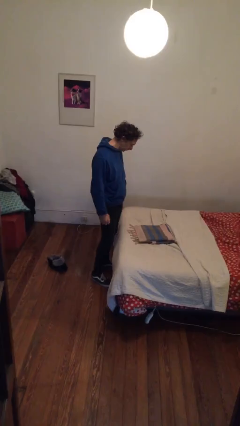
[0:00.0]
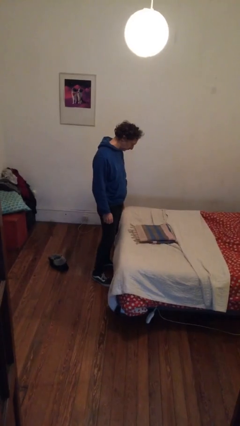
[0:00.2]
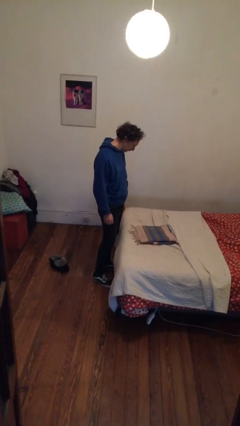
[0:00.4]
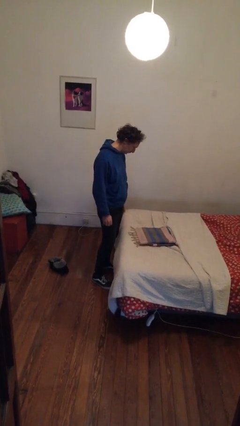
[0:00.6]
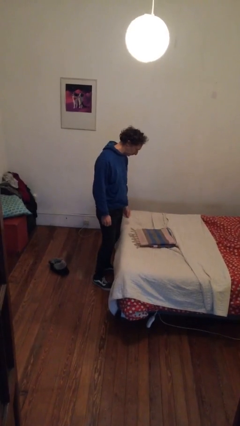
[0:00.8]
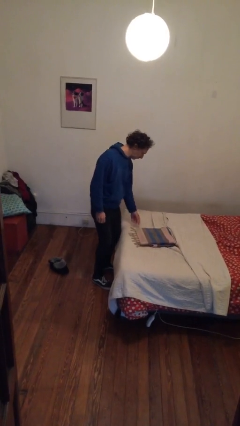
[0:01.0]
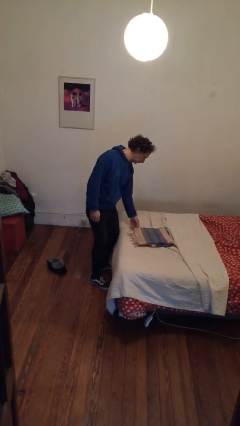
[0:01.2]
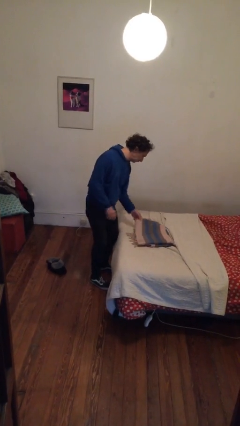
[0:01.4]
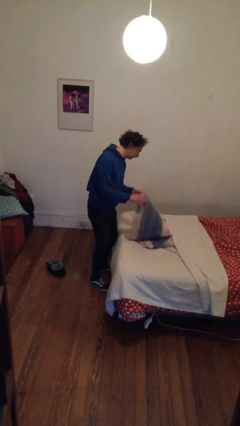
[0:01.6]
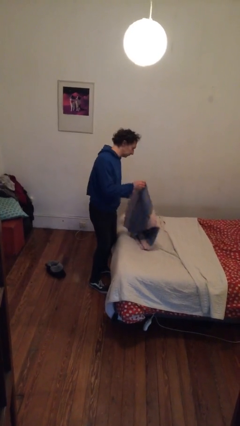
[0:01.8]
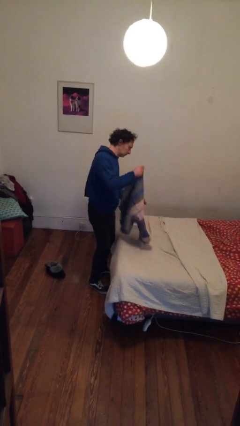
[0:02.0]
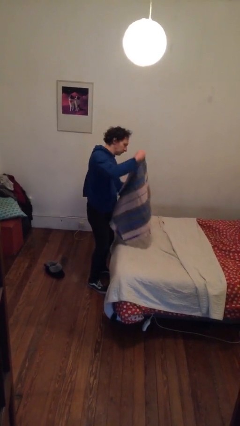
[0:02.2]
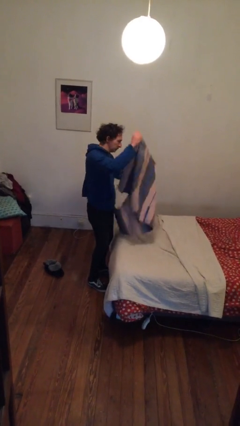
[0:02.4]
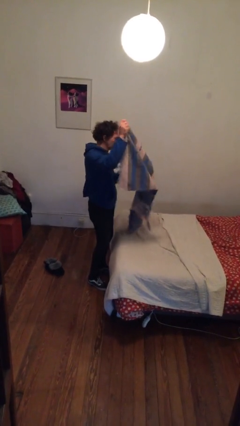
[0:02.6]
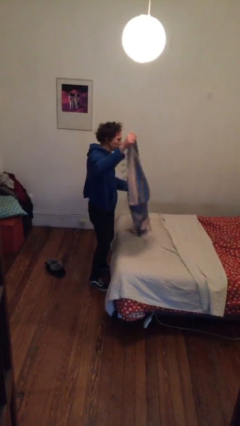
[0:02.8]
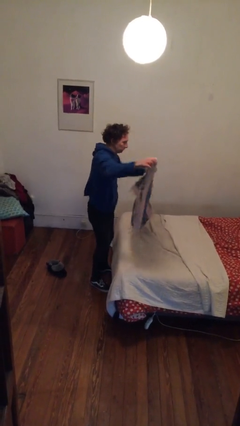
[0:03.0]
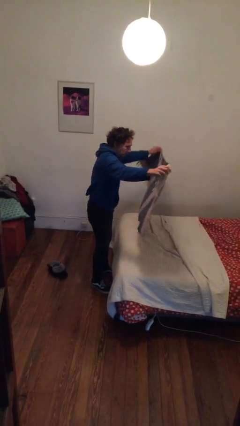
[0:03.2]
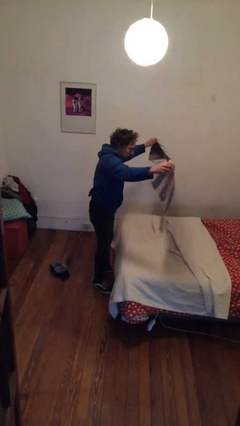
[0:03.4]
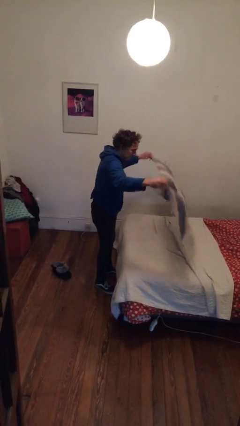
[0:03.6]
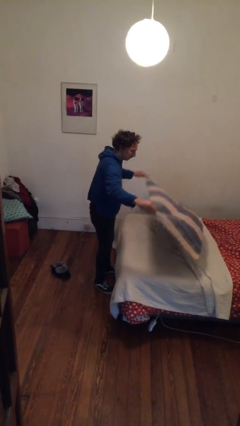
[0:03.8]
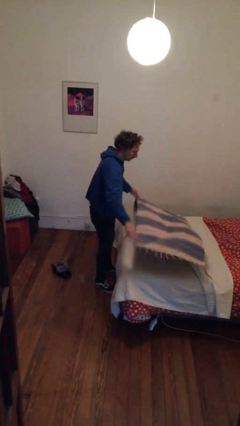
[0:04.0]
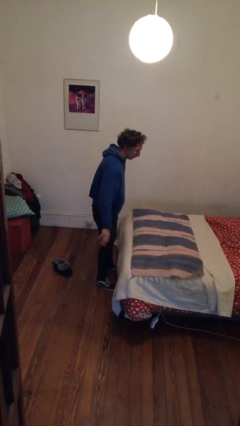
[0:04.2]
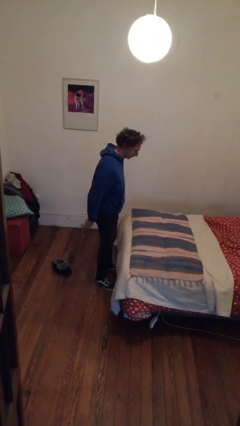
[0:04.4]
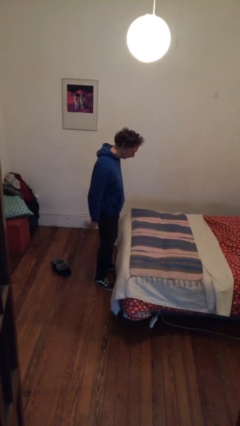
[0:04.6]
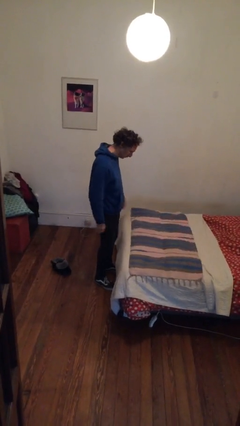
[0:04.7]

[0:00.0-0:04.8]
person unfolds blanket

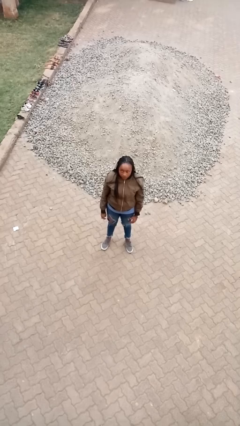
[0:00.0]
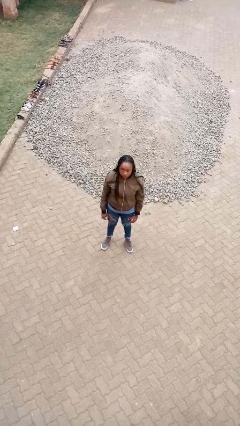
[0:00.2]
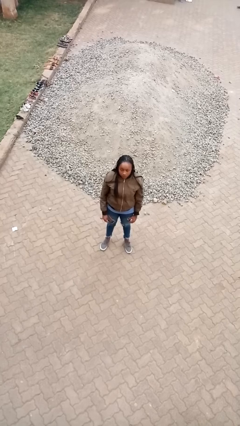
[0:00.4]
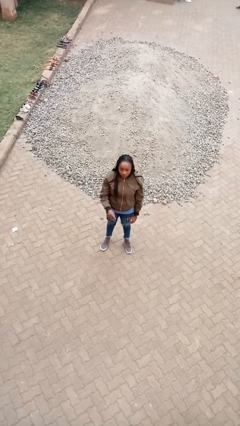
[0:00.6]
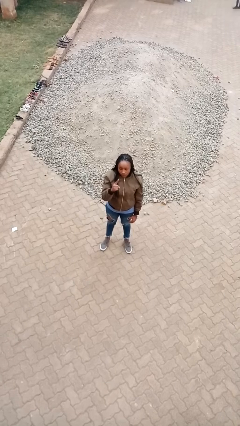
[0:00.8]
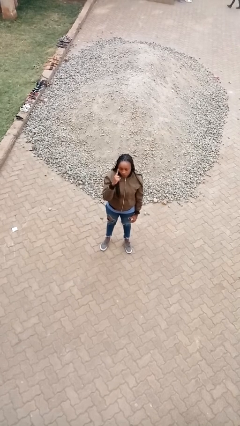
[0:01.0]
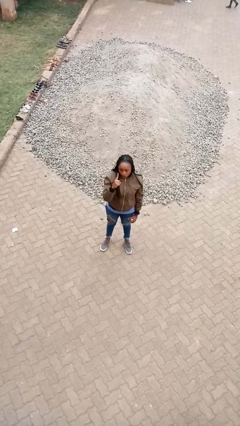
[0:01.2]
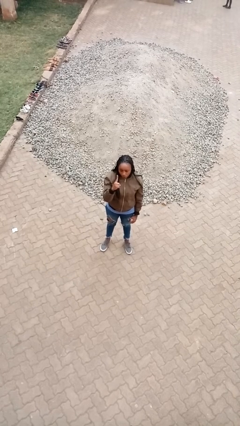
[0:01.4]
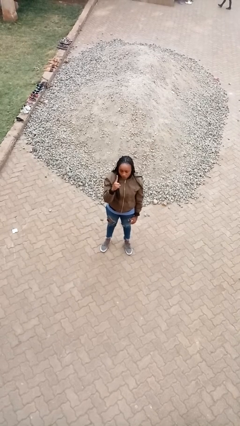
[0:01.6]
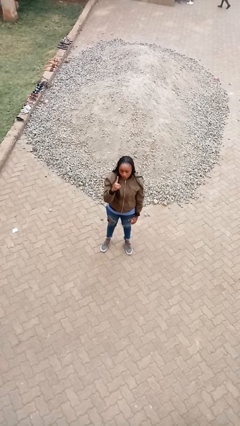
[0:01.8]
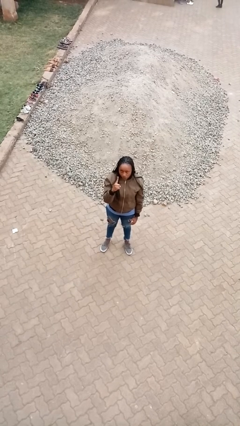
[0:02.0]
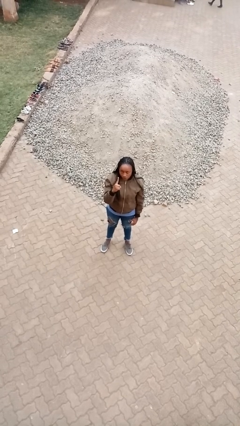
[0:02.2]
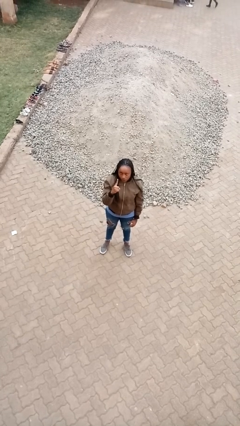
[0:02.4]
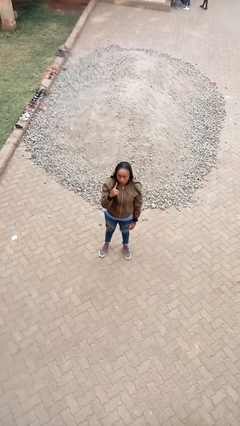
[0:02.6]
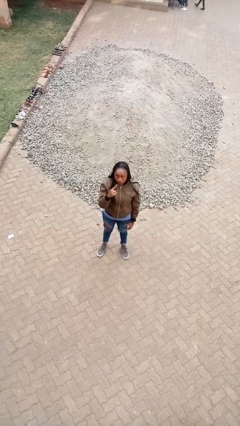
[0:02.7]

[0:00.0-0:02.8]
person gestures number one

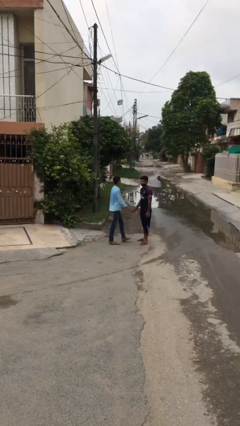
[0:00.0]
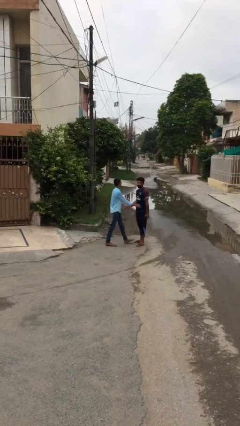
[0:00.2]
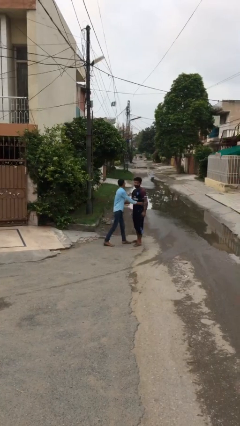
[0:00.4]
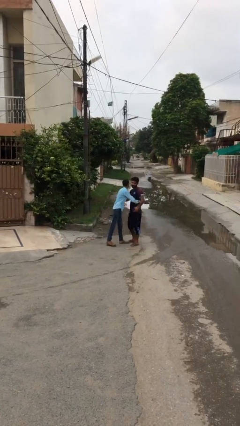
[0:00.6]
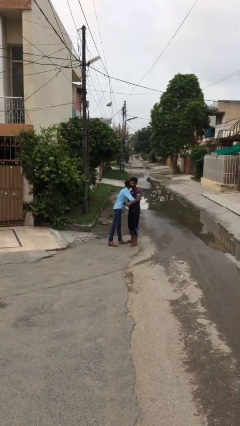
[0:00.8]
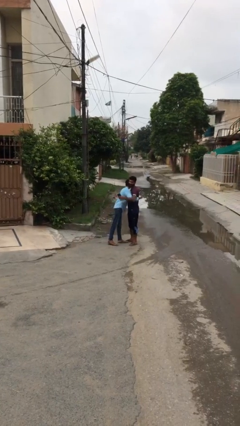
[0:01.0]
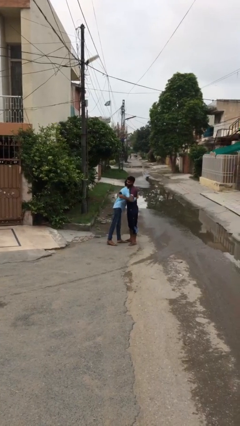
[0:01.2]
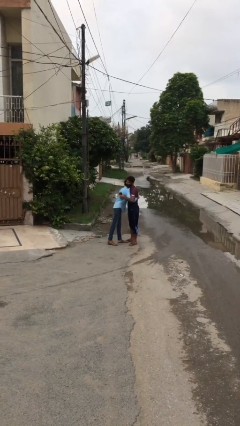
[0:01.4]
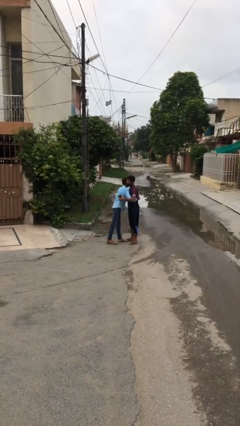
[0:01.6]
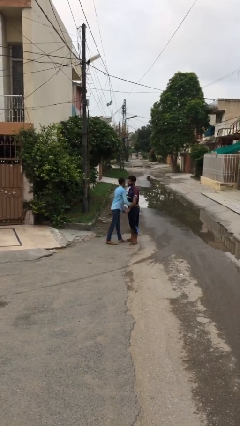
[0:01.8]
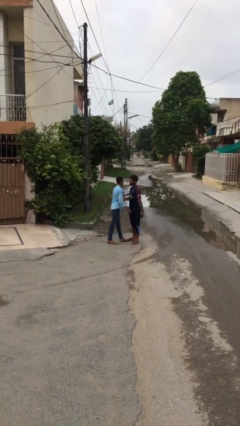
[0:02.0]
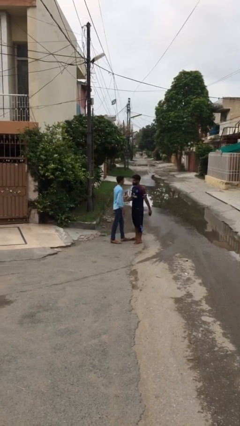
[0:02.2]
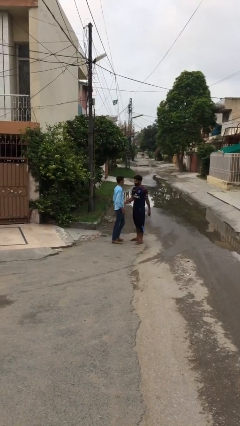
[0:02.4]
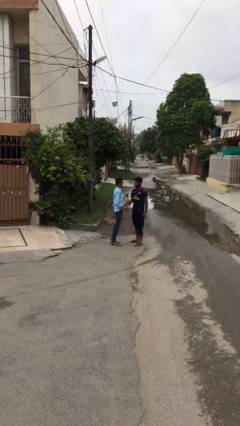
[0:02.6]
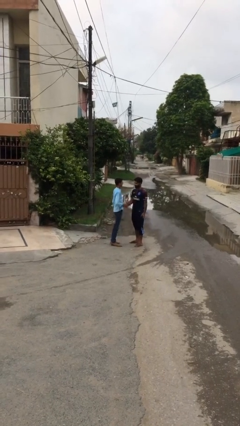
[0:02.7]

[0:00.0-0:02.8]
person embraces person

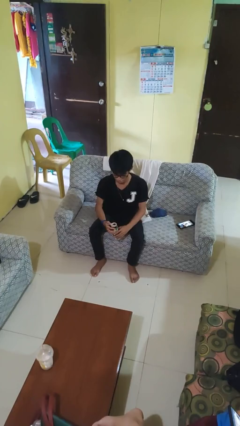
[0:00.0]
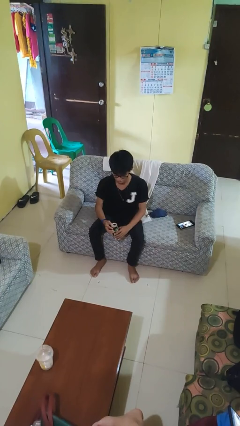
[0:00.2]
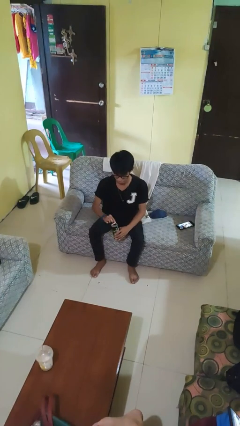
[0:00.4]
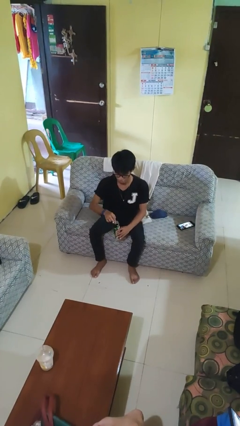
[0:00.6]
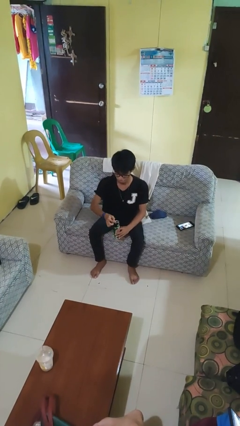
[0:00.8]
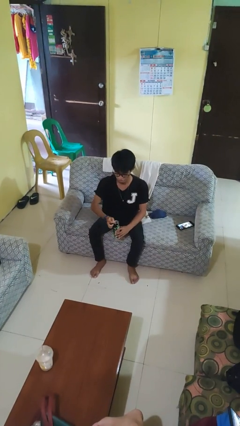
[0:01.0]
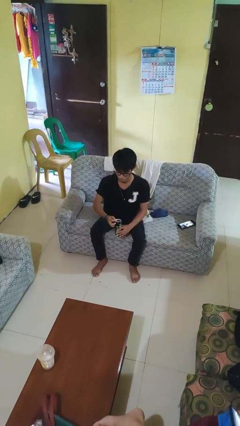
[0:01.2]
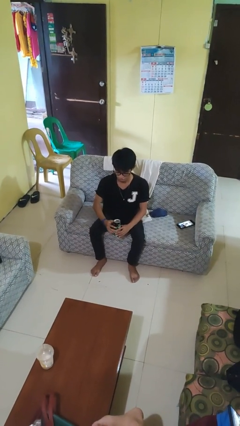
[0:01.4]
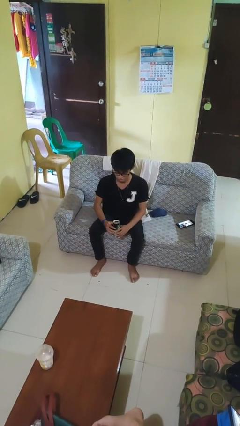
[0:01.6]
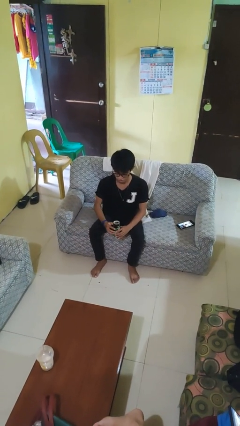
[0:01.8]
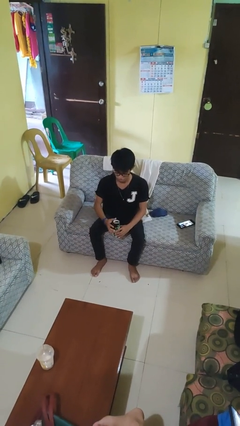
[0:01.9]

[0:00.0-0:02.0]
person opens beverage can

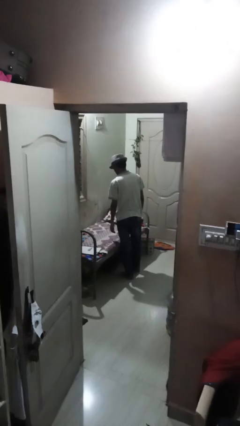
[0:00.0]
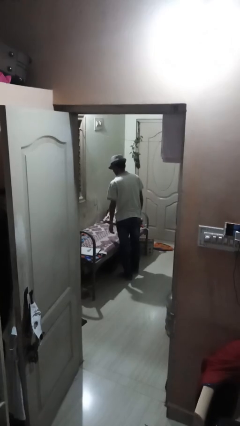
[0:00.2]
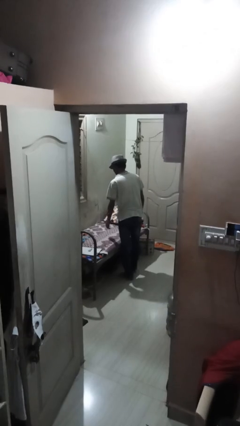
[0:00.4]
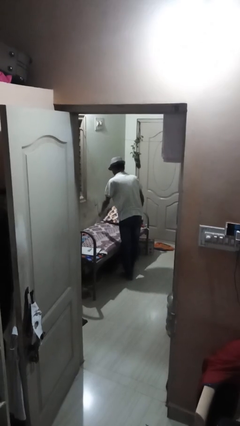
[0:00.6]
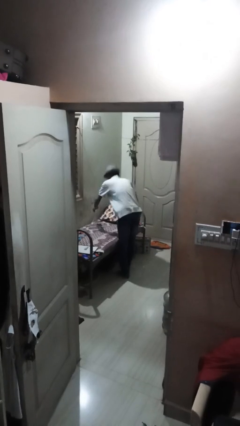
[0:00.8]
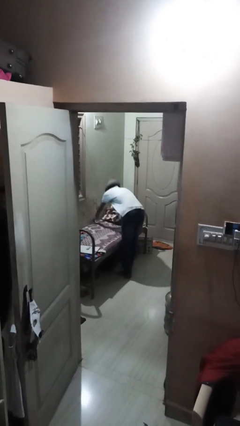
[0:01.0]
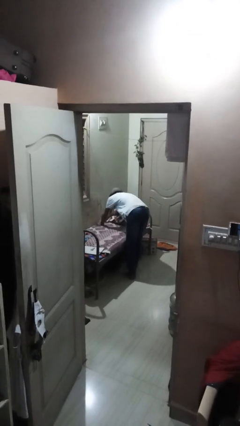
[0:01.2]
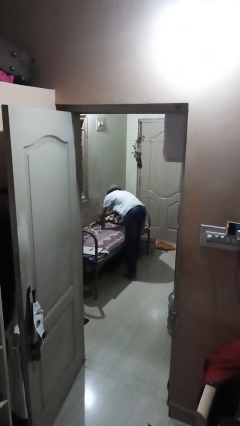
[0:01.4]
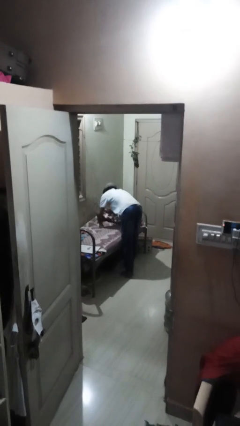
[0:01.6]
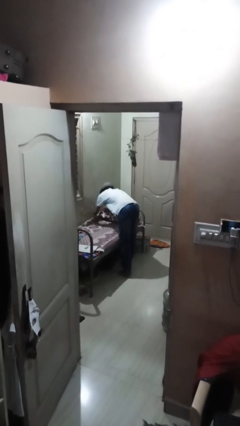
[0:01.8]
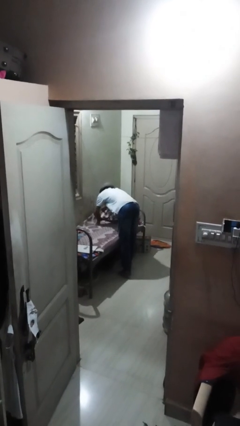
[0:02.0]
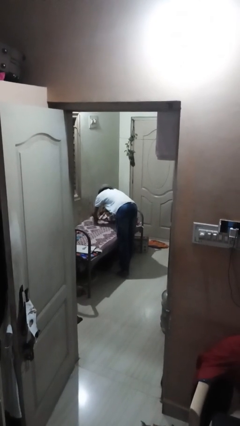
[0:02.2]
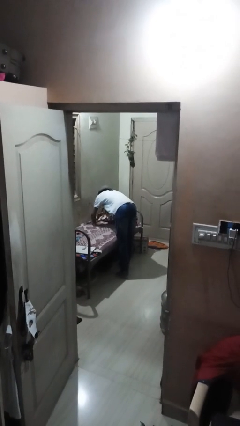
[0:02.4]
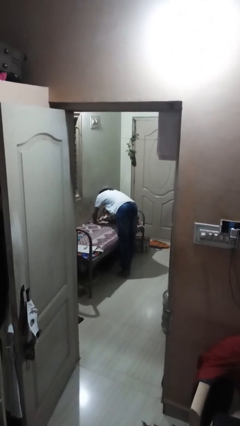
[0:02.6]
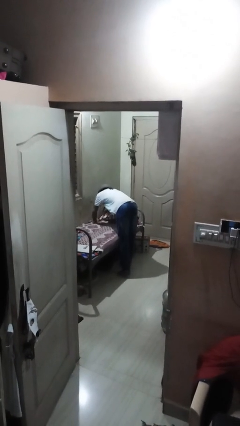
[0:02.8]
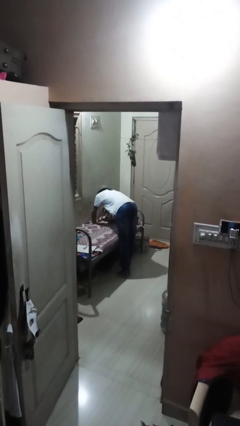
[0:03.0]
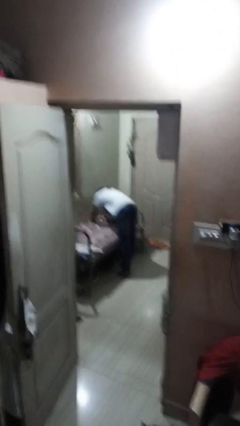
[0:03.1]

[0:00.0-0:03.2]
person makes bed

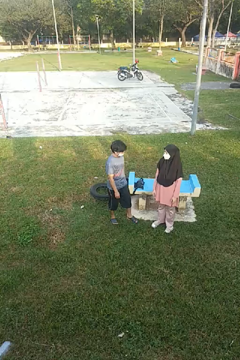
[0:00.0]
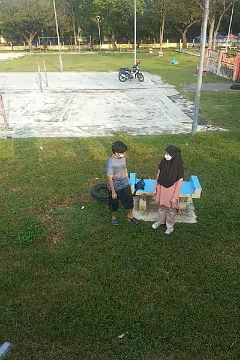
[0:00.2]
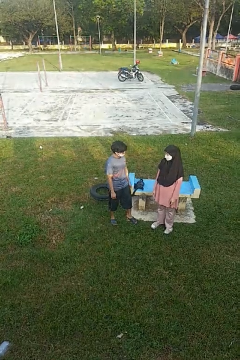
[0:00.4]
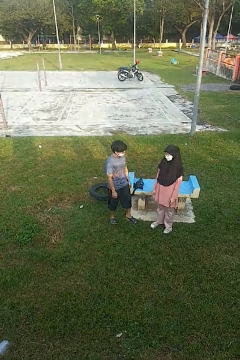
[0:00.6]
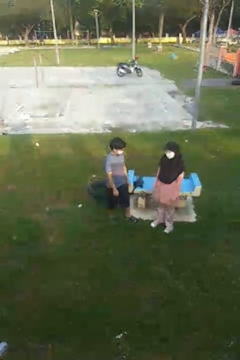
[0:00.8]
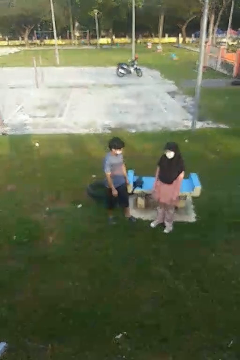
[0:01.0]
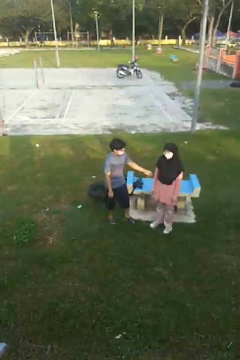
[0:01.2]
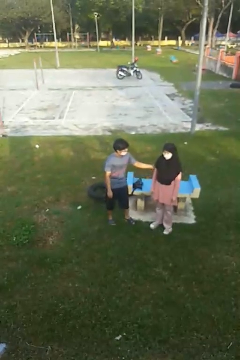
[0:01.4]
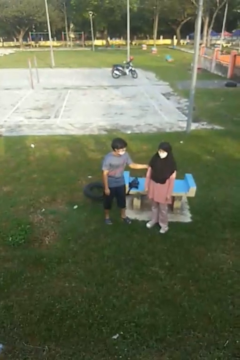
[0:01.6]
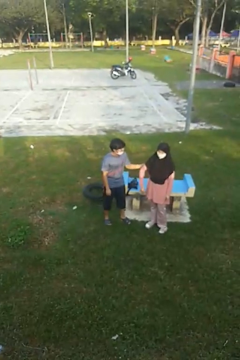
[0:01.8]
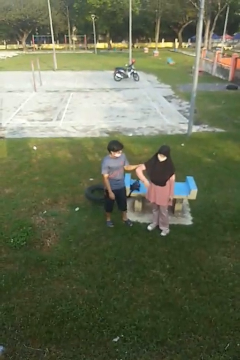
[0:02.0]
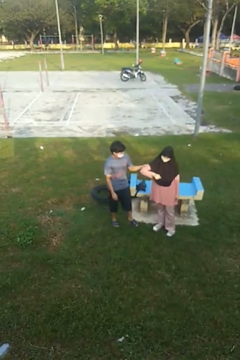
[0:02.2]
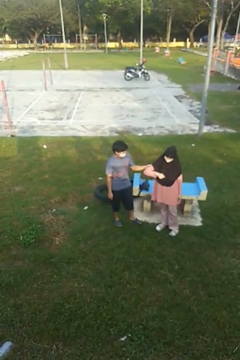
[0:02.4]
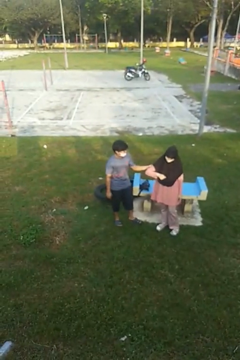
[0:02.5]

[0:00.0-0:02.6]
person grabs person by bicep
